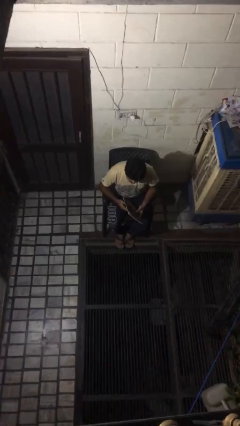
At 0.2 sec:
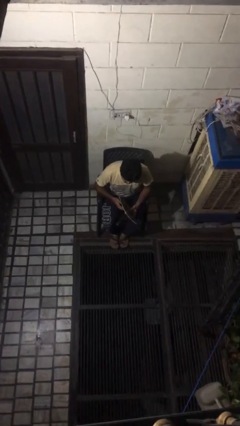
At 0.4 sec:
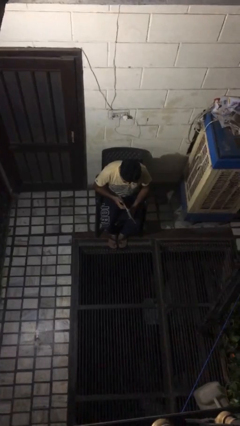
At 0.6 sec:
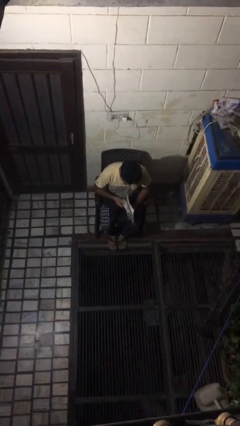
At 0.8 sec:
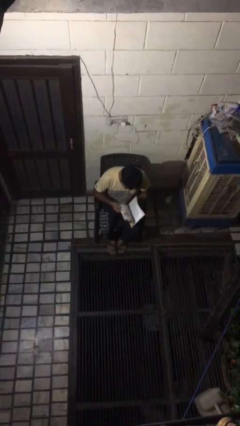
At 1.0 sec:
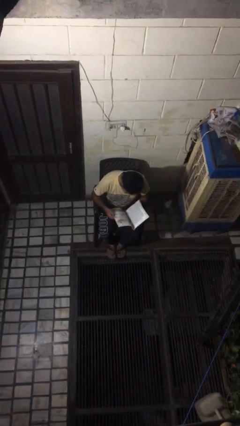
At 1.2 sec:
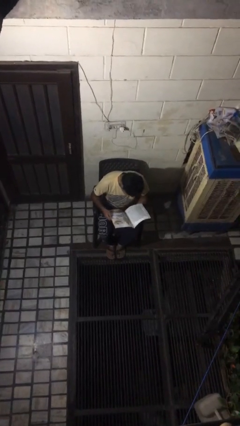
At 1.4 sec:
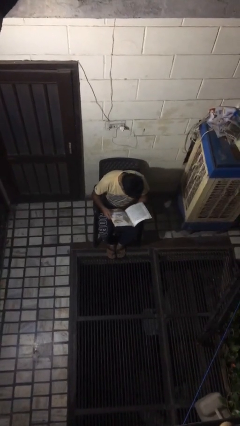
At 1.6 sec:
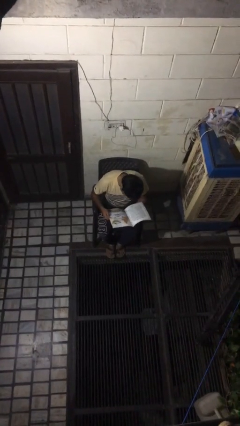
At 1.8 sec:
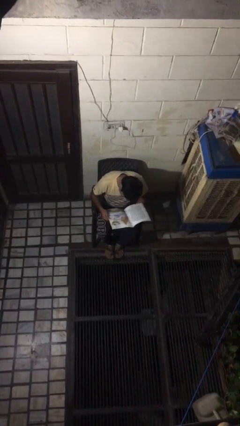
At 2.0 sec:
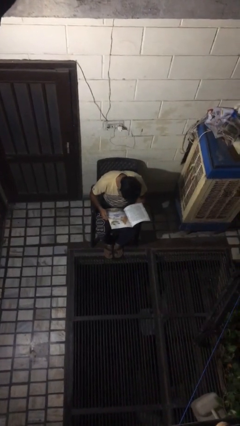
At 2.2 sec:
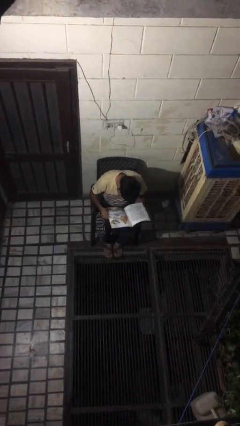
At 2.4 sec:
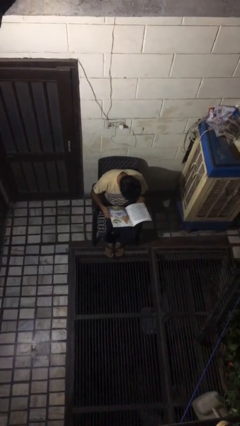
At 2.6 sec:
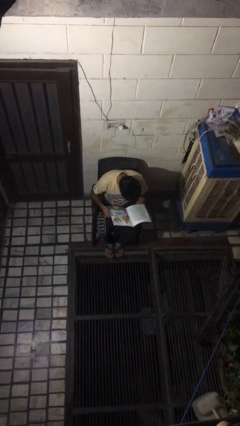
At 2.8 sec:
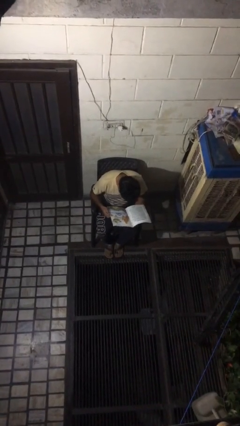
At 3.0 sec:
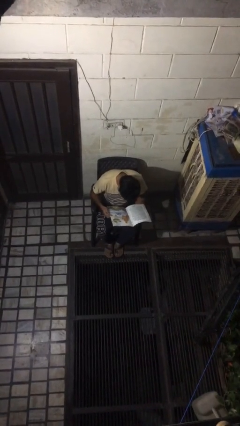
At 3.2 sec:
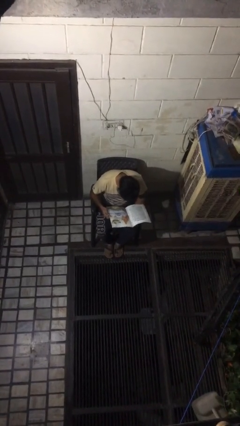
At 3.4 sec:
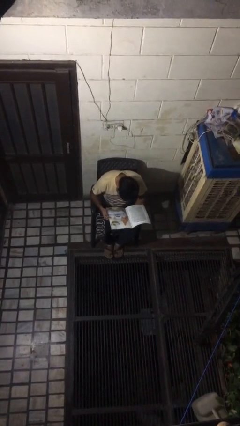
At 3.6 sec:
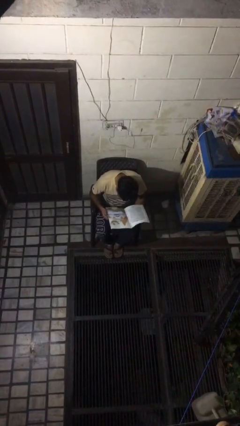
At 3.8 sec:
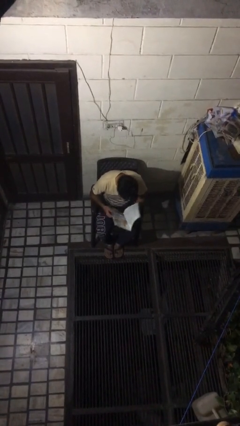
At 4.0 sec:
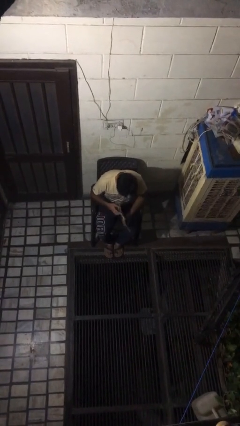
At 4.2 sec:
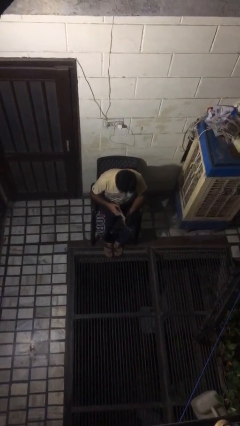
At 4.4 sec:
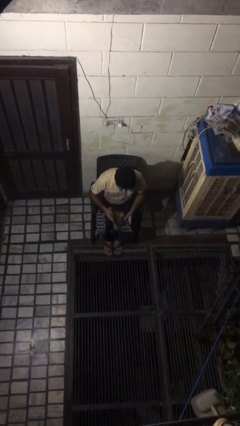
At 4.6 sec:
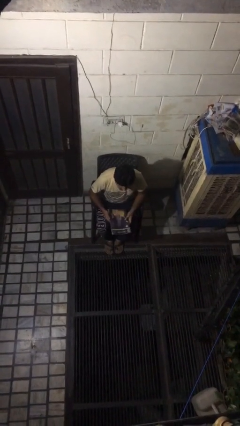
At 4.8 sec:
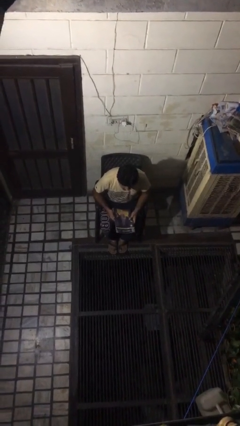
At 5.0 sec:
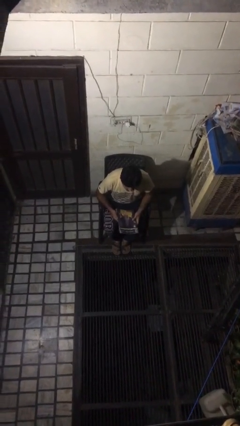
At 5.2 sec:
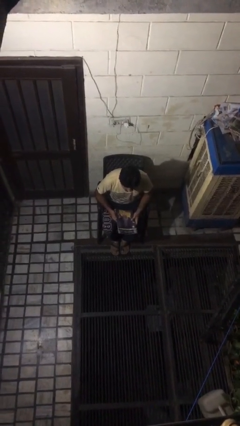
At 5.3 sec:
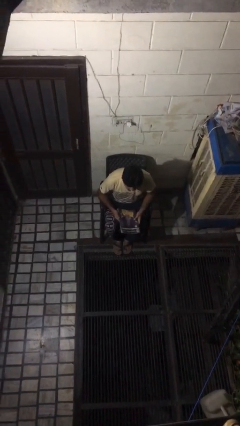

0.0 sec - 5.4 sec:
person reads magazine

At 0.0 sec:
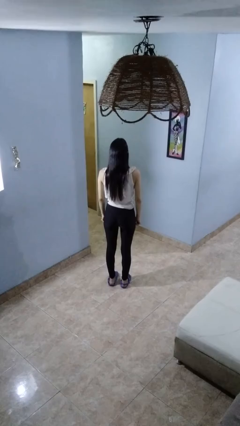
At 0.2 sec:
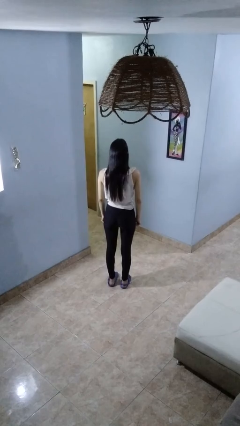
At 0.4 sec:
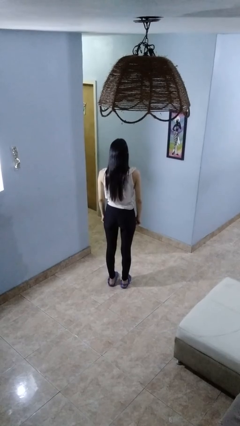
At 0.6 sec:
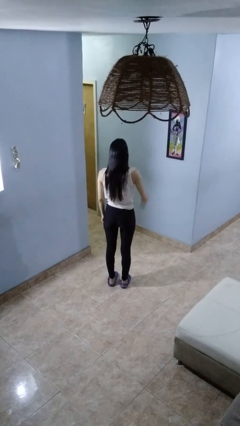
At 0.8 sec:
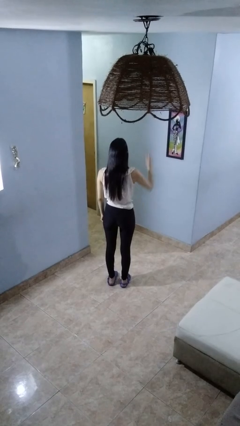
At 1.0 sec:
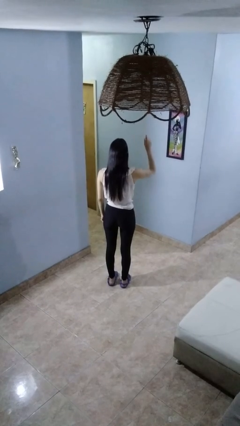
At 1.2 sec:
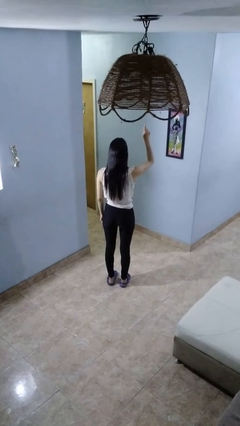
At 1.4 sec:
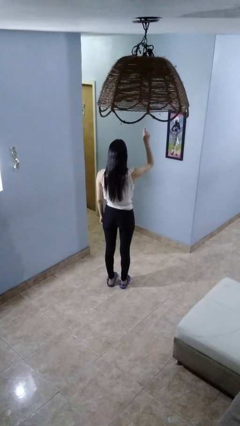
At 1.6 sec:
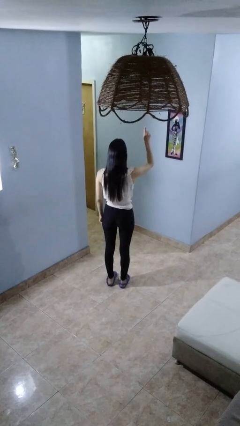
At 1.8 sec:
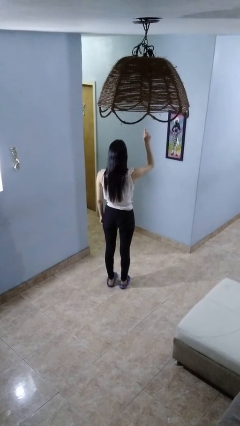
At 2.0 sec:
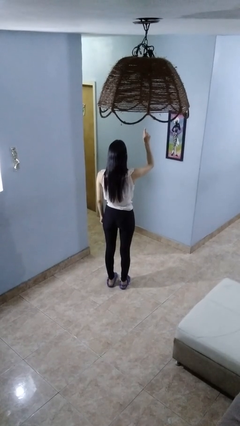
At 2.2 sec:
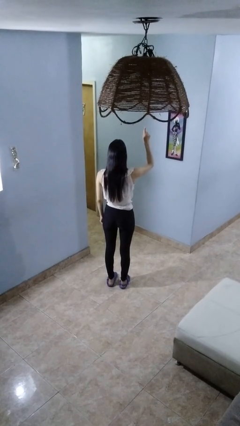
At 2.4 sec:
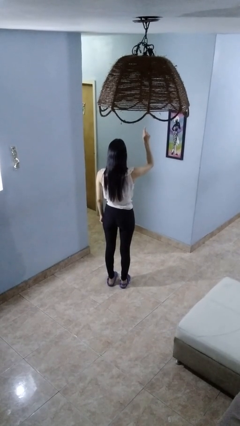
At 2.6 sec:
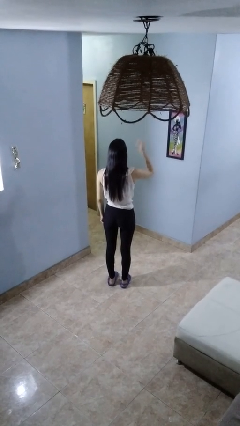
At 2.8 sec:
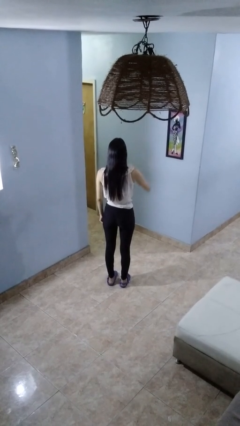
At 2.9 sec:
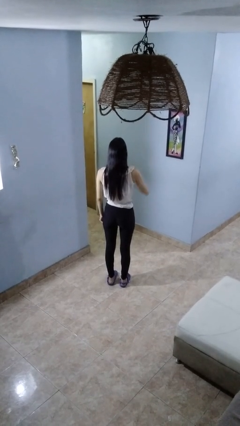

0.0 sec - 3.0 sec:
person gestures number one

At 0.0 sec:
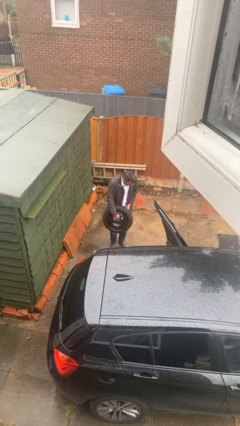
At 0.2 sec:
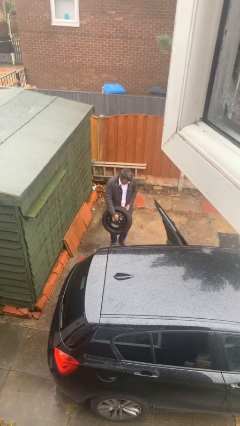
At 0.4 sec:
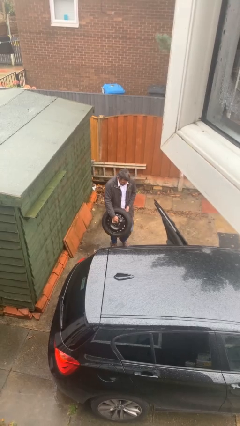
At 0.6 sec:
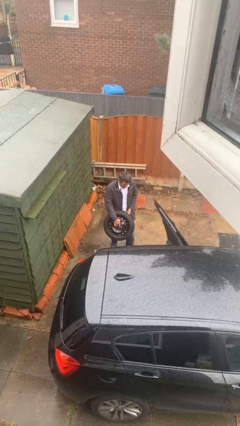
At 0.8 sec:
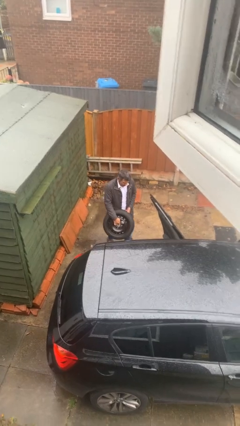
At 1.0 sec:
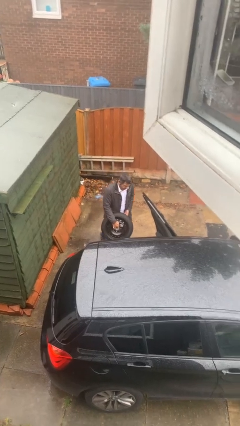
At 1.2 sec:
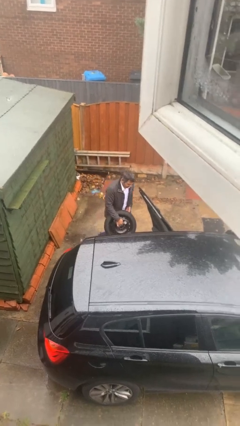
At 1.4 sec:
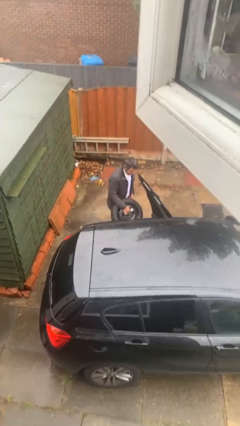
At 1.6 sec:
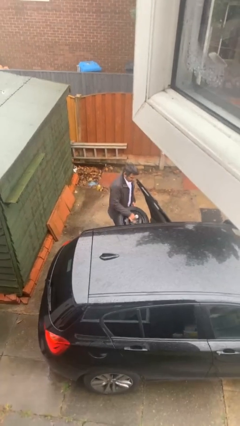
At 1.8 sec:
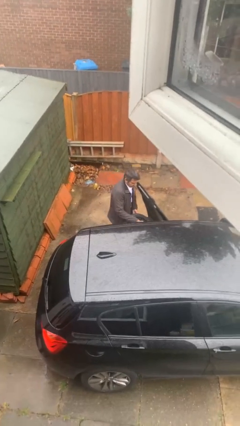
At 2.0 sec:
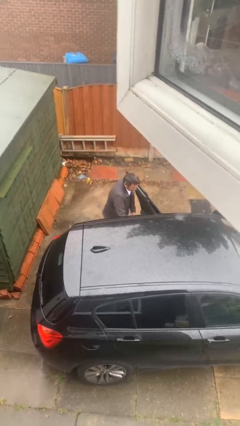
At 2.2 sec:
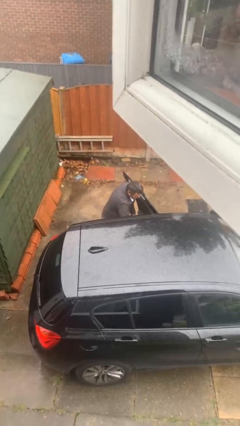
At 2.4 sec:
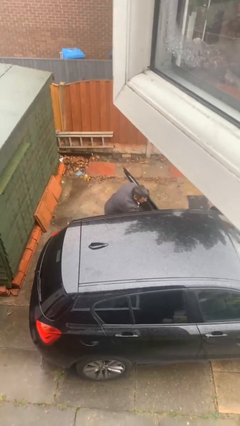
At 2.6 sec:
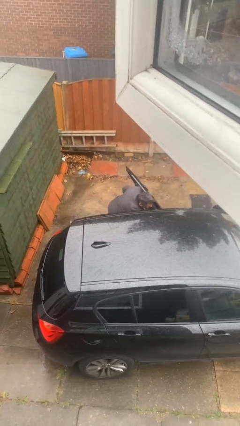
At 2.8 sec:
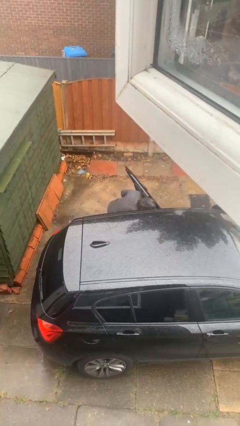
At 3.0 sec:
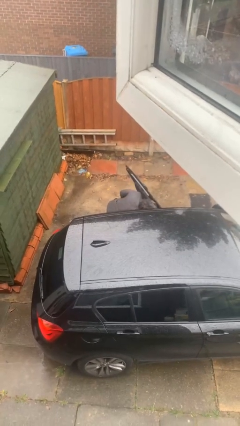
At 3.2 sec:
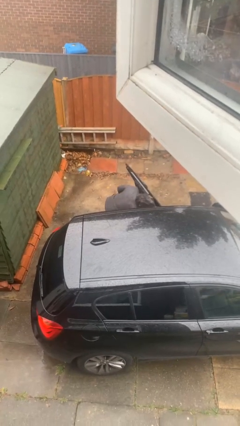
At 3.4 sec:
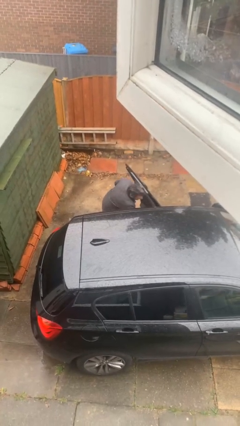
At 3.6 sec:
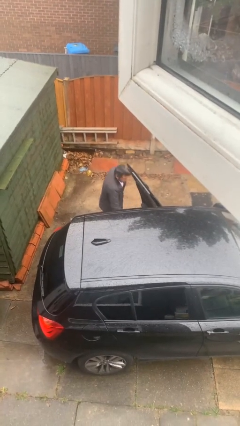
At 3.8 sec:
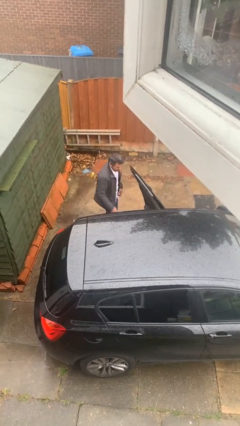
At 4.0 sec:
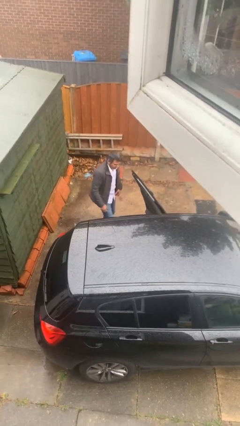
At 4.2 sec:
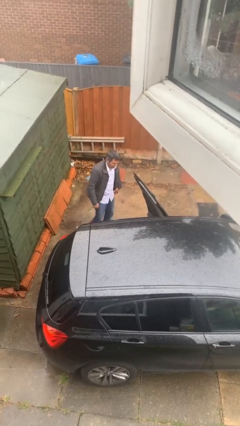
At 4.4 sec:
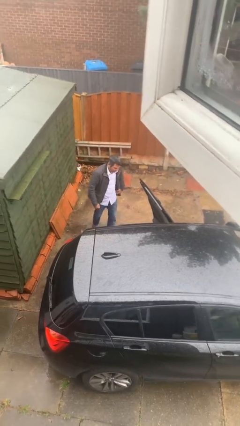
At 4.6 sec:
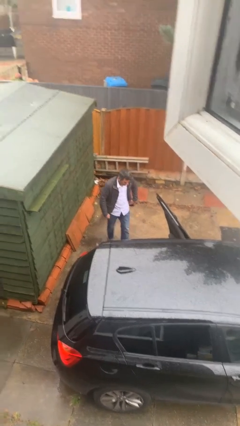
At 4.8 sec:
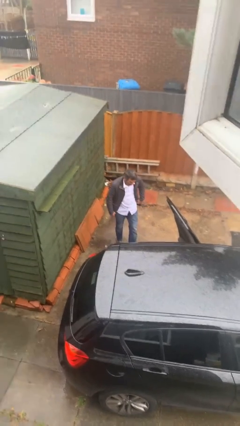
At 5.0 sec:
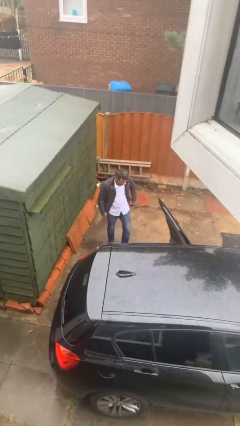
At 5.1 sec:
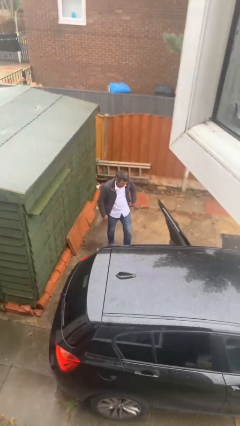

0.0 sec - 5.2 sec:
person loads car

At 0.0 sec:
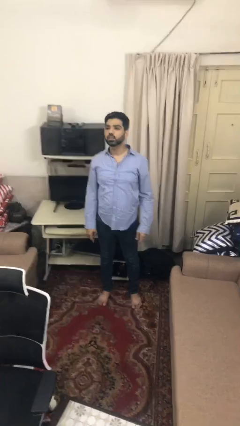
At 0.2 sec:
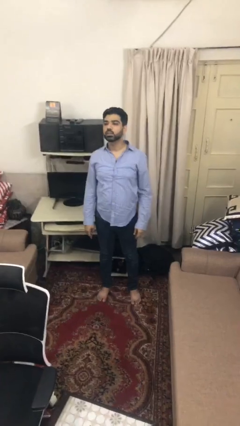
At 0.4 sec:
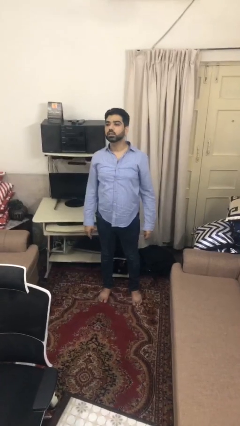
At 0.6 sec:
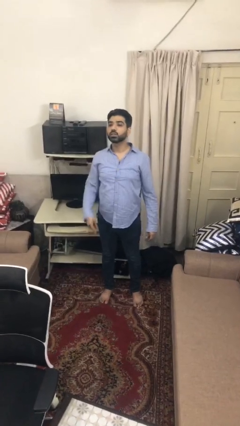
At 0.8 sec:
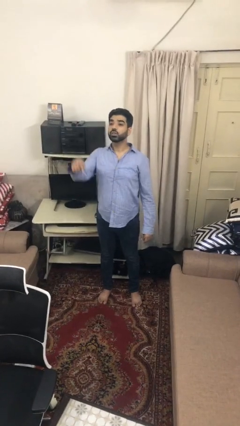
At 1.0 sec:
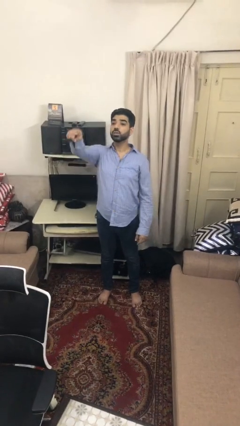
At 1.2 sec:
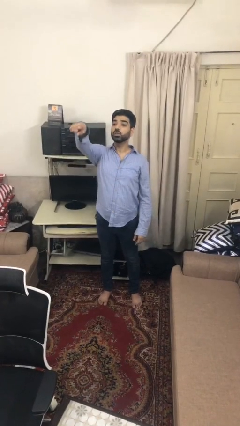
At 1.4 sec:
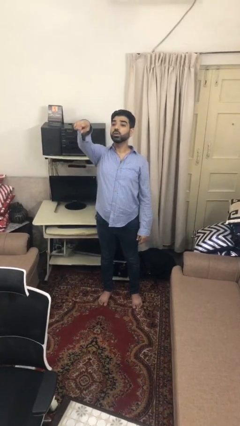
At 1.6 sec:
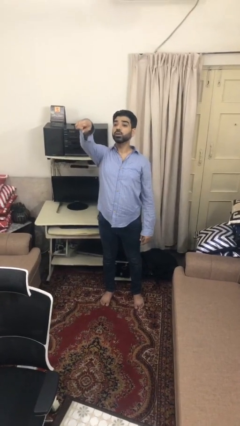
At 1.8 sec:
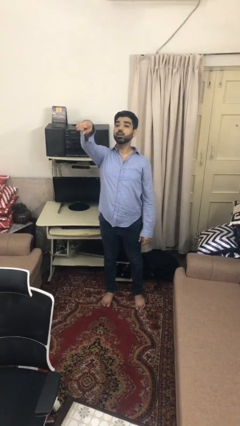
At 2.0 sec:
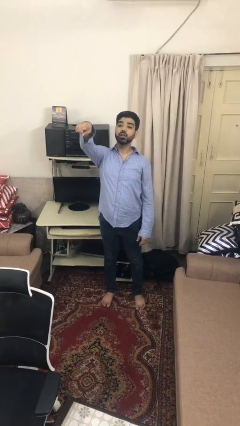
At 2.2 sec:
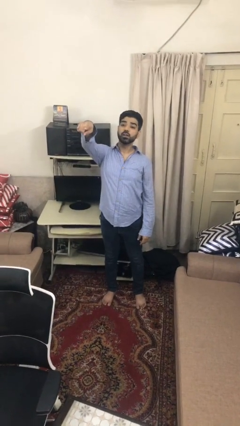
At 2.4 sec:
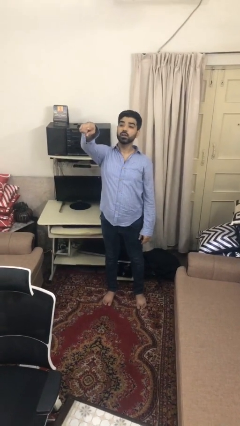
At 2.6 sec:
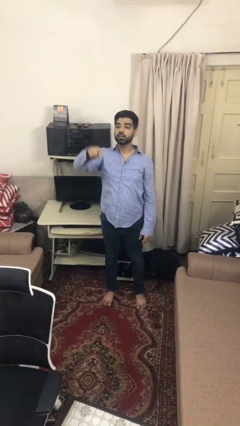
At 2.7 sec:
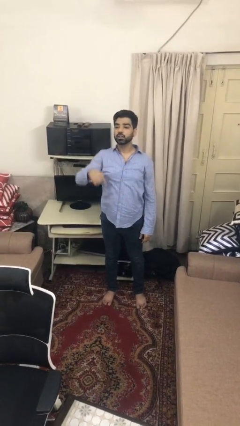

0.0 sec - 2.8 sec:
person points at person

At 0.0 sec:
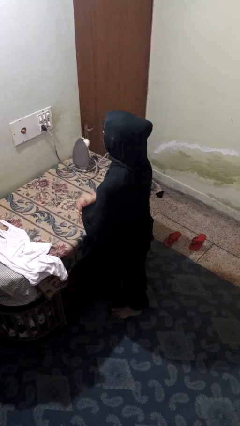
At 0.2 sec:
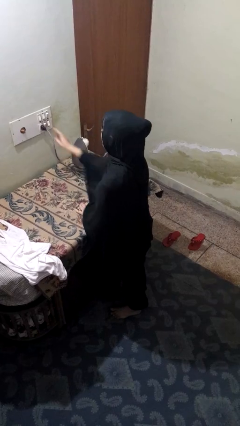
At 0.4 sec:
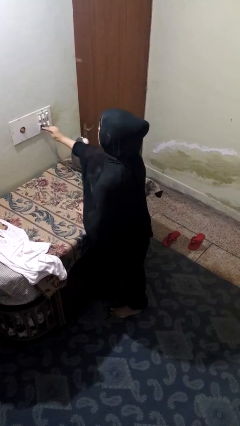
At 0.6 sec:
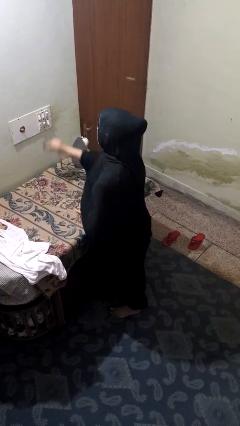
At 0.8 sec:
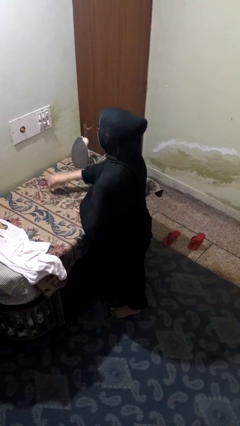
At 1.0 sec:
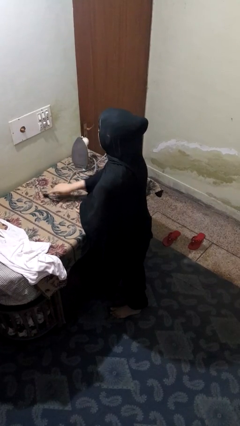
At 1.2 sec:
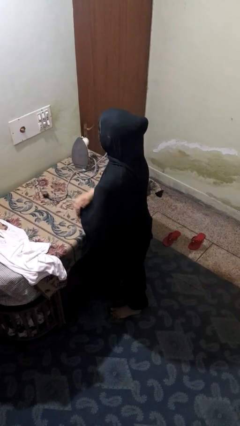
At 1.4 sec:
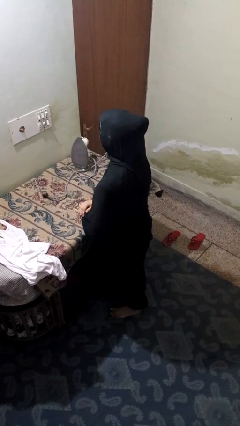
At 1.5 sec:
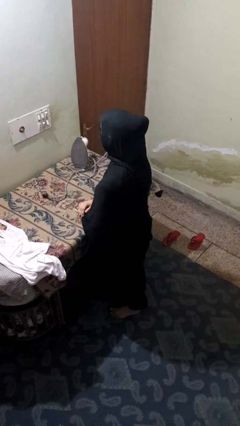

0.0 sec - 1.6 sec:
person unplugs from electrical socket
